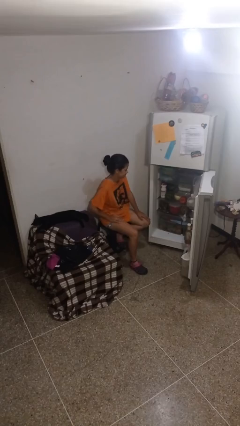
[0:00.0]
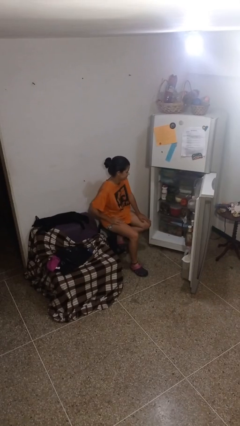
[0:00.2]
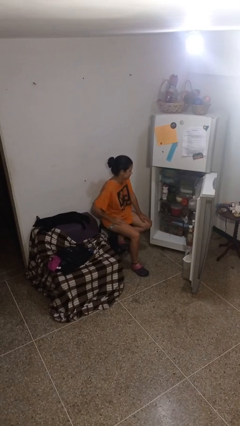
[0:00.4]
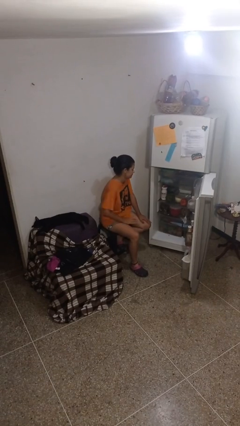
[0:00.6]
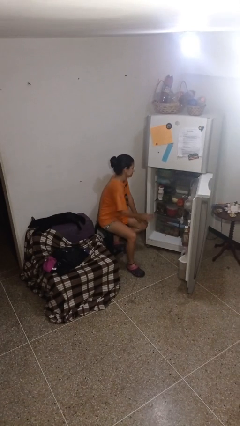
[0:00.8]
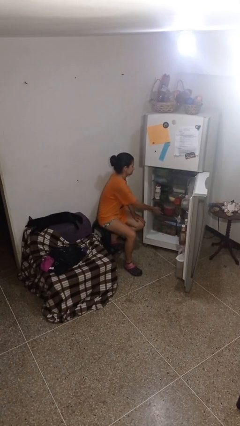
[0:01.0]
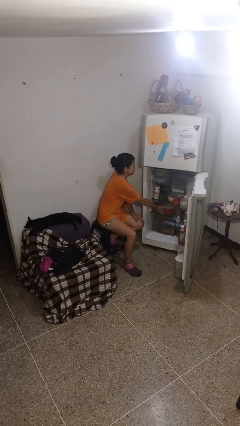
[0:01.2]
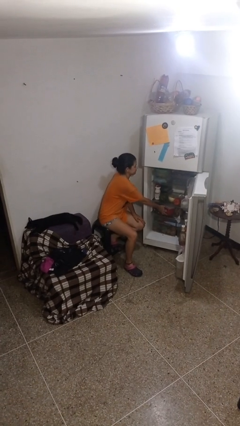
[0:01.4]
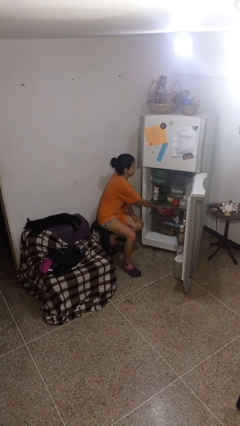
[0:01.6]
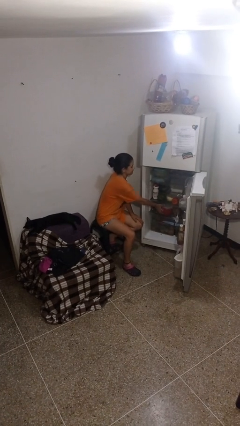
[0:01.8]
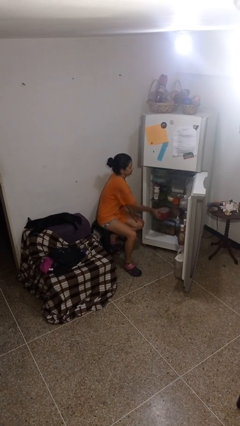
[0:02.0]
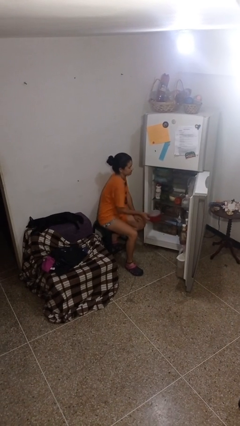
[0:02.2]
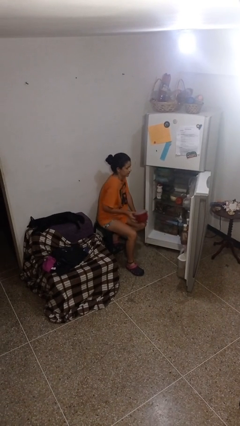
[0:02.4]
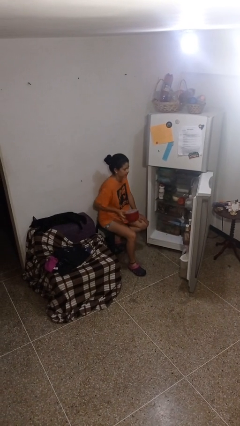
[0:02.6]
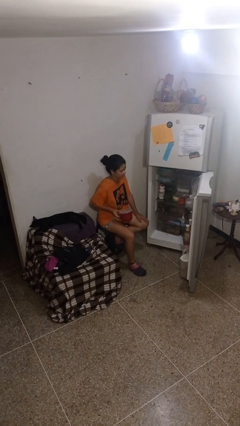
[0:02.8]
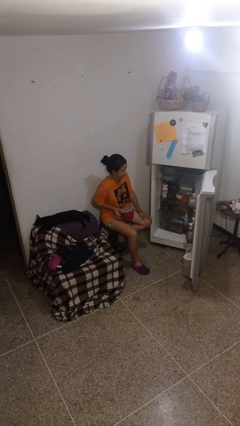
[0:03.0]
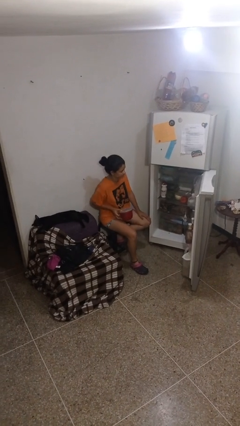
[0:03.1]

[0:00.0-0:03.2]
person takes object from refrigerator

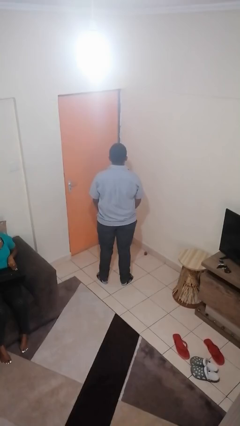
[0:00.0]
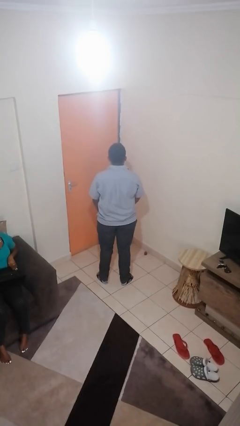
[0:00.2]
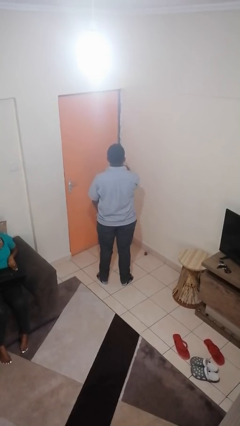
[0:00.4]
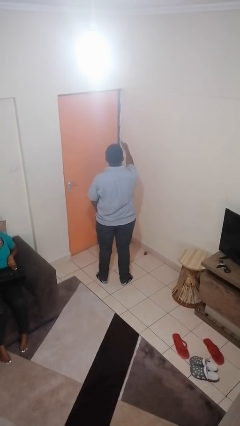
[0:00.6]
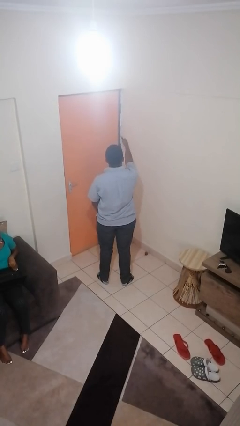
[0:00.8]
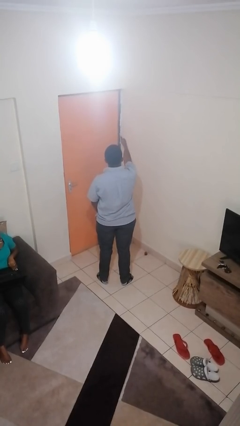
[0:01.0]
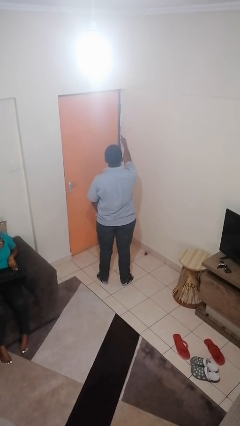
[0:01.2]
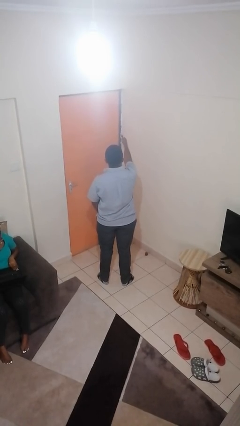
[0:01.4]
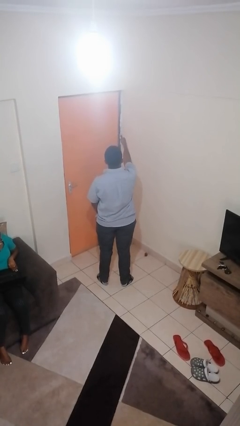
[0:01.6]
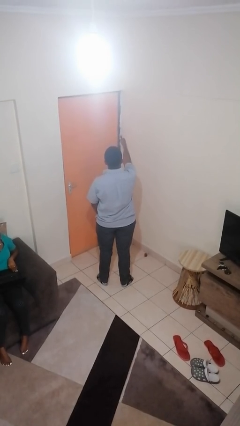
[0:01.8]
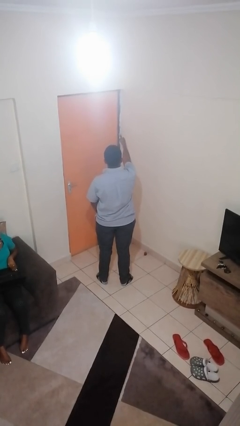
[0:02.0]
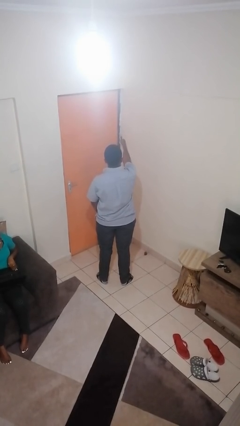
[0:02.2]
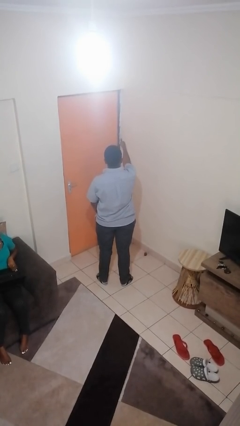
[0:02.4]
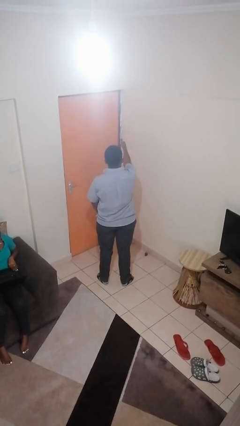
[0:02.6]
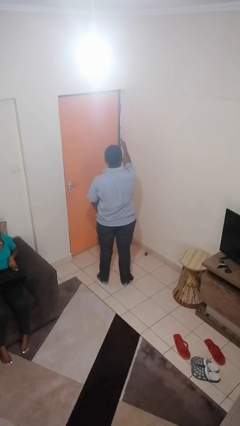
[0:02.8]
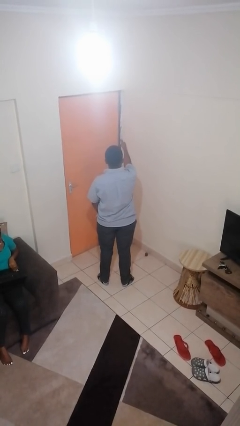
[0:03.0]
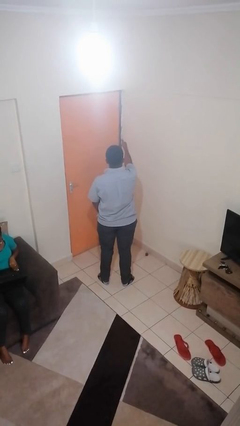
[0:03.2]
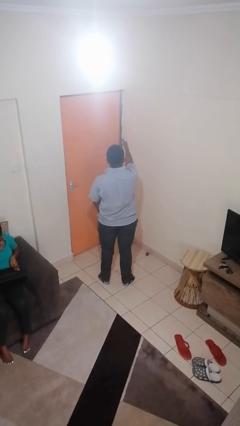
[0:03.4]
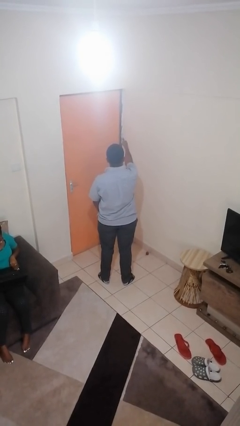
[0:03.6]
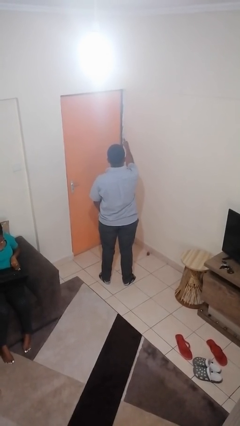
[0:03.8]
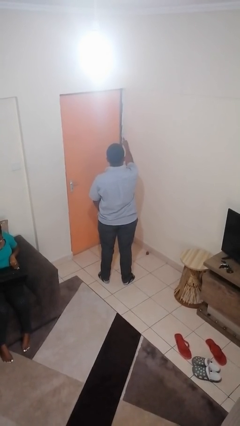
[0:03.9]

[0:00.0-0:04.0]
person gestures thumbs up

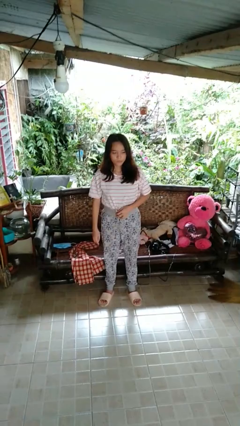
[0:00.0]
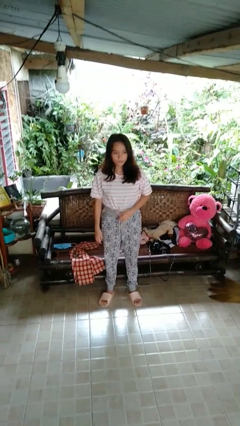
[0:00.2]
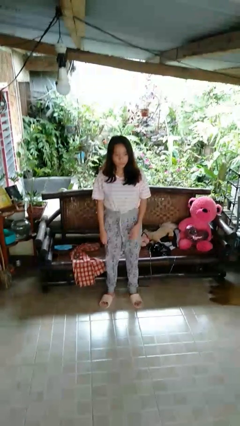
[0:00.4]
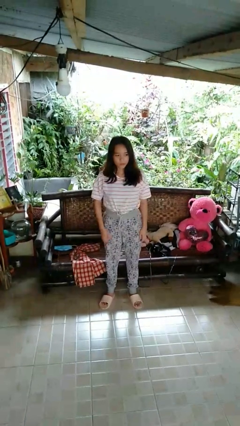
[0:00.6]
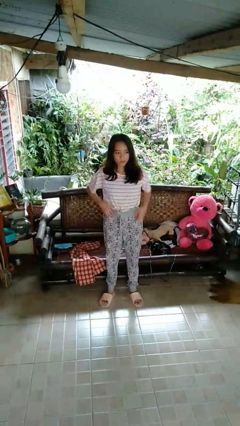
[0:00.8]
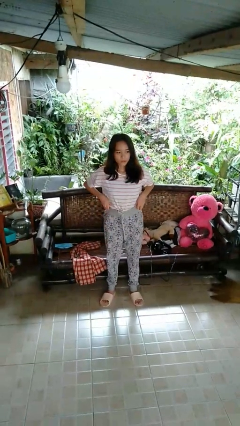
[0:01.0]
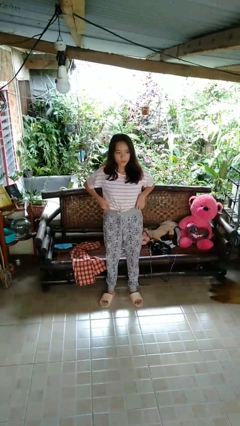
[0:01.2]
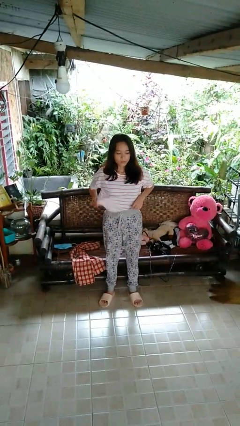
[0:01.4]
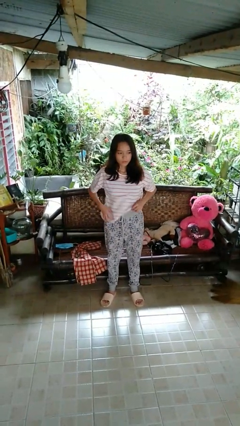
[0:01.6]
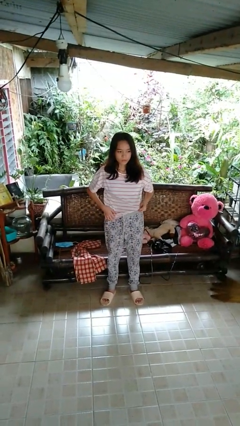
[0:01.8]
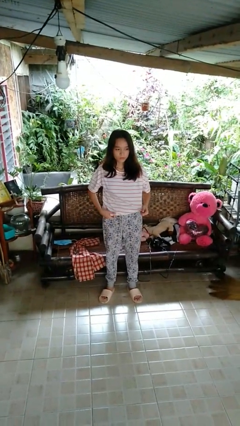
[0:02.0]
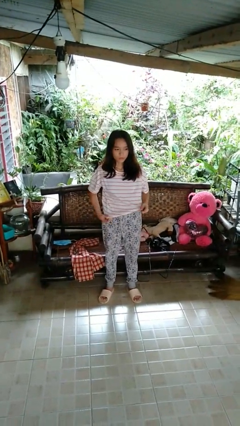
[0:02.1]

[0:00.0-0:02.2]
person untucks shirt

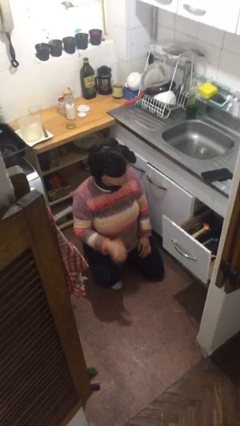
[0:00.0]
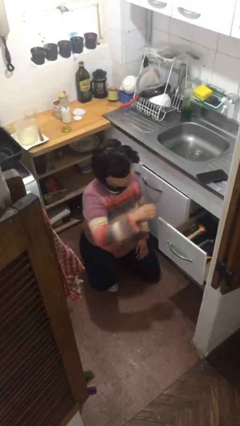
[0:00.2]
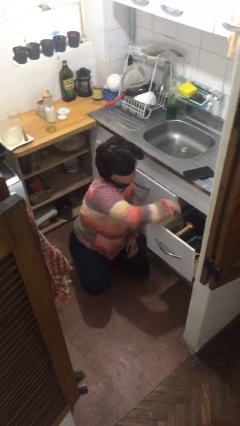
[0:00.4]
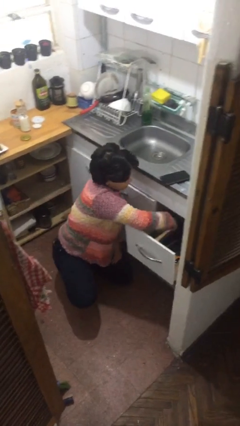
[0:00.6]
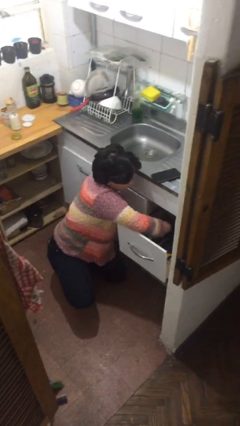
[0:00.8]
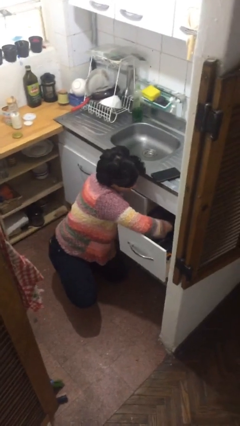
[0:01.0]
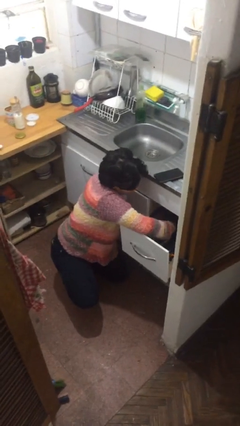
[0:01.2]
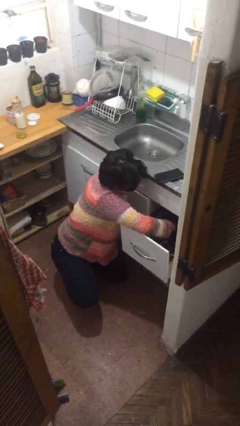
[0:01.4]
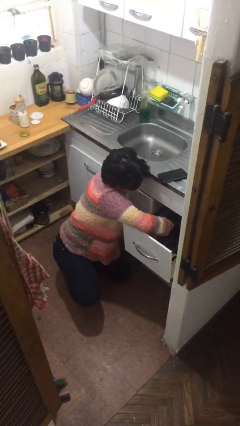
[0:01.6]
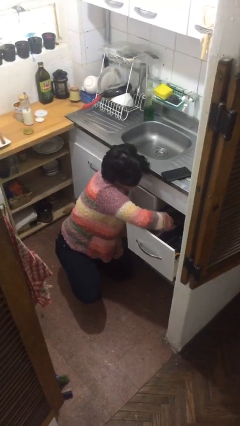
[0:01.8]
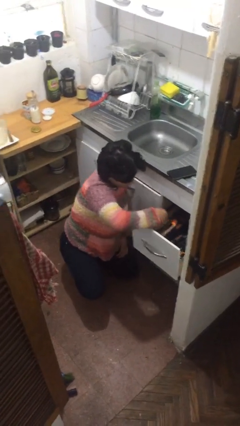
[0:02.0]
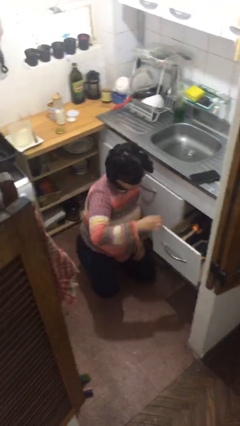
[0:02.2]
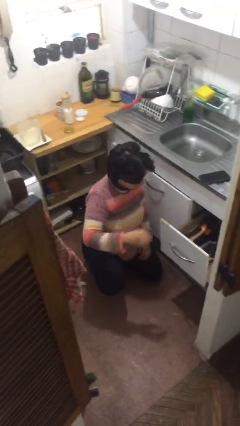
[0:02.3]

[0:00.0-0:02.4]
person searches in kitchen drawer

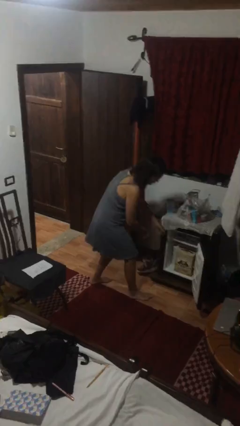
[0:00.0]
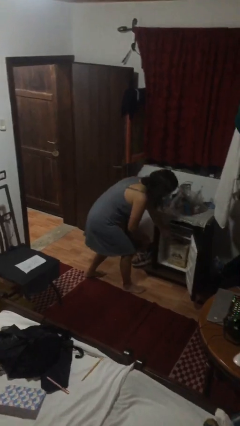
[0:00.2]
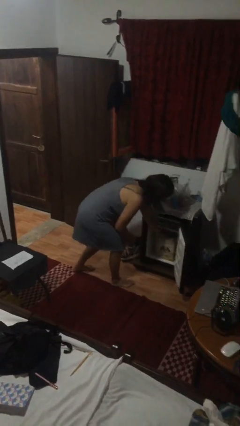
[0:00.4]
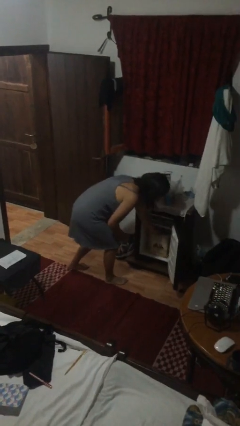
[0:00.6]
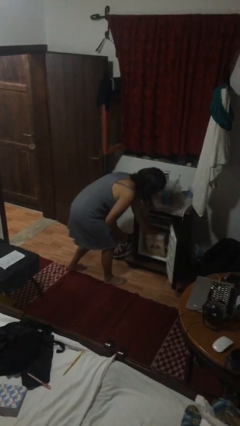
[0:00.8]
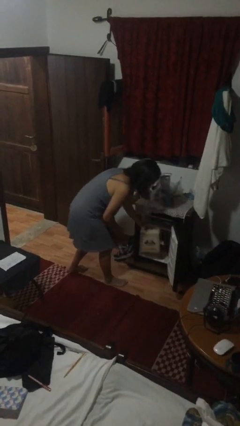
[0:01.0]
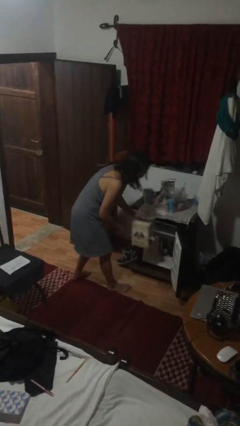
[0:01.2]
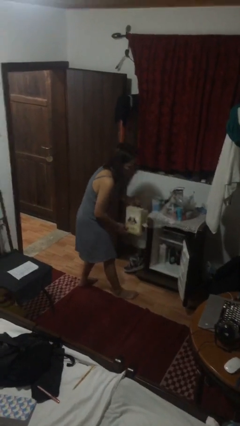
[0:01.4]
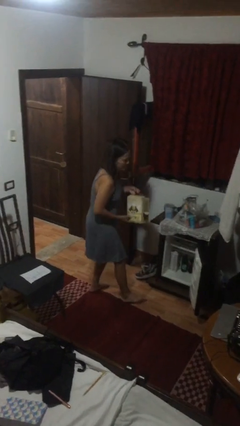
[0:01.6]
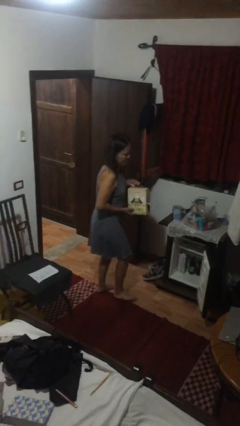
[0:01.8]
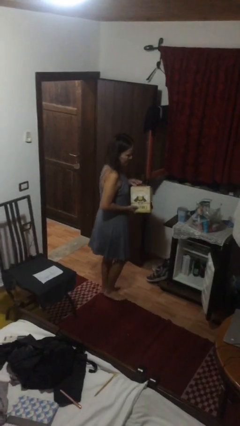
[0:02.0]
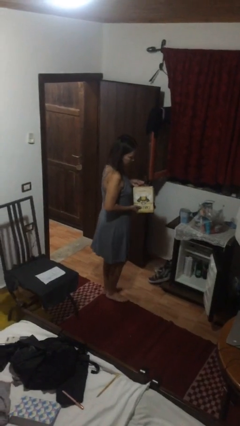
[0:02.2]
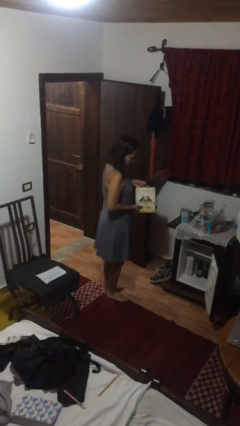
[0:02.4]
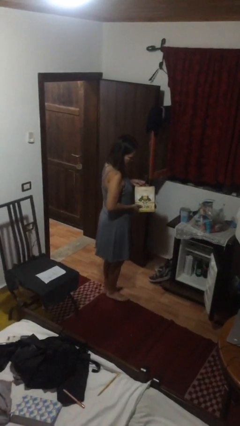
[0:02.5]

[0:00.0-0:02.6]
person picks up object from cabinet

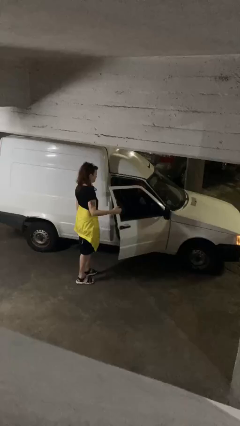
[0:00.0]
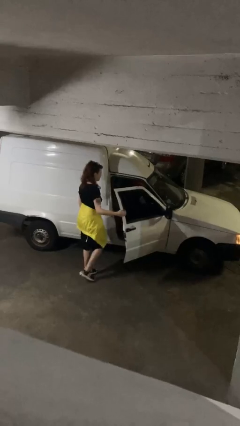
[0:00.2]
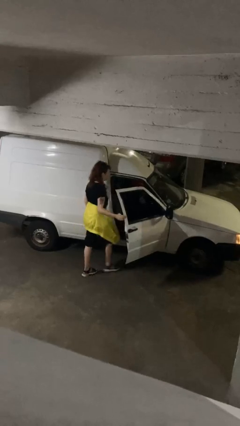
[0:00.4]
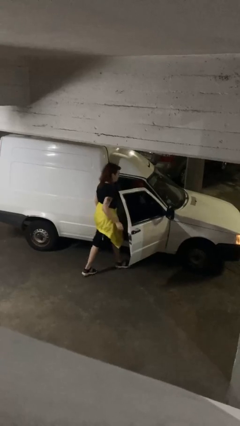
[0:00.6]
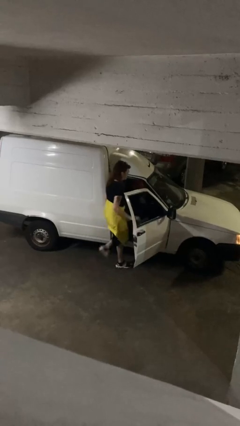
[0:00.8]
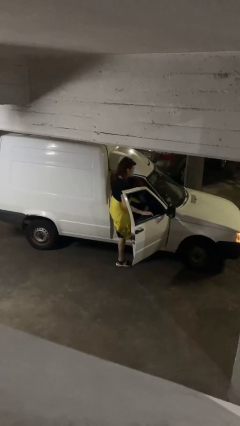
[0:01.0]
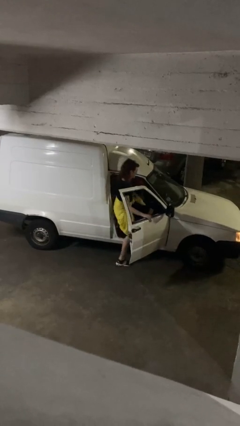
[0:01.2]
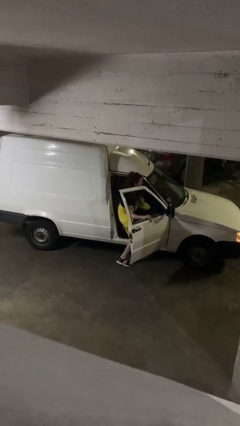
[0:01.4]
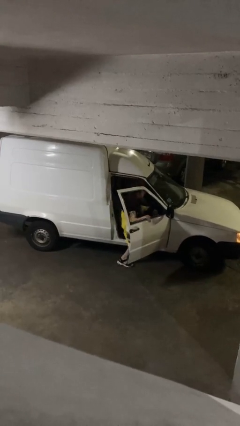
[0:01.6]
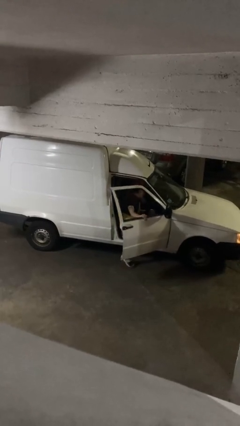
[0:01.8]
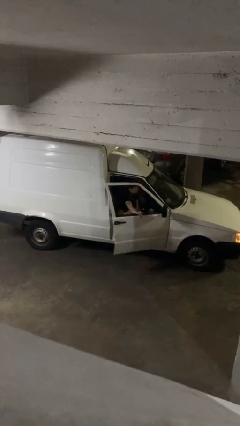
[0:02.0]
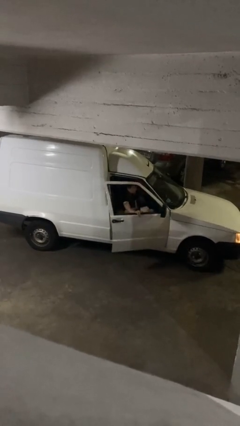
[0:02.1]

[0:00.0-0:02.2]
car picks up person

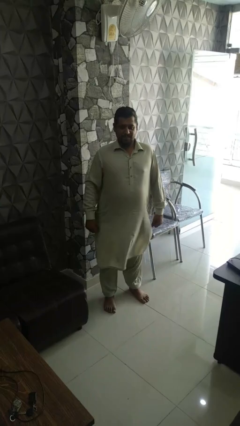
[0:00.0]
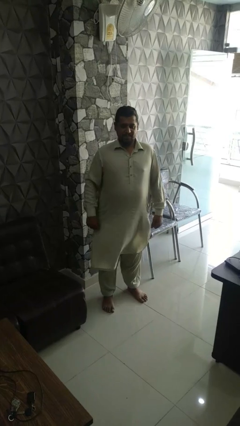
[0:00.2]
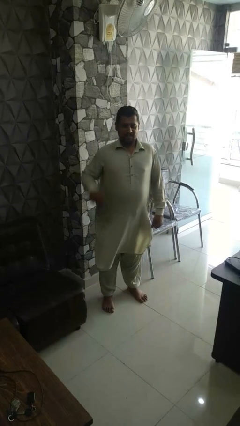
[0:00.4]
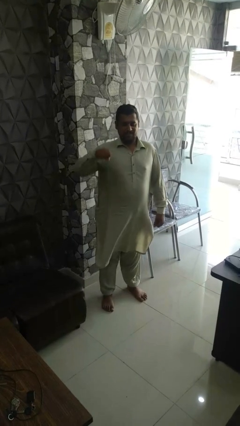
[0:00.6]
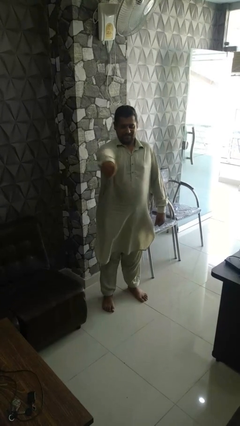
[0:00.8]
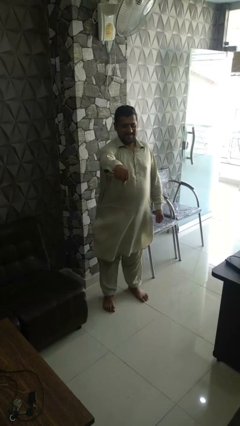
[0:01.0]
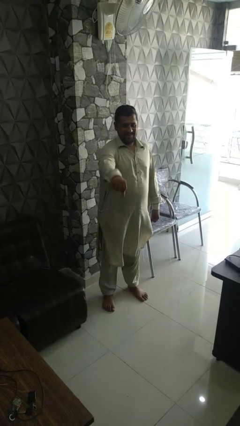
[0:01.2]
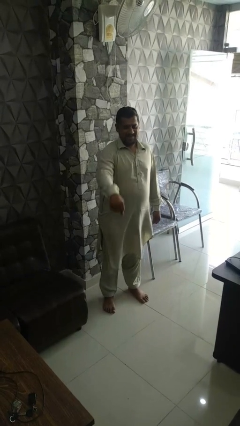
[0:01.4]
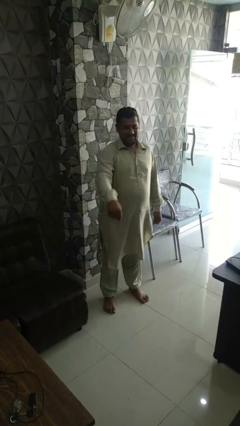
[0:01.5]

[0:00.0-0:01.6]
person karate chop
